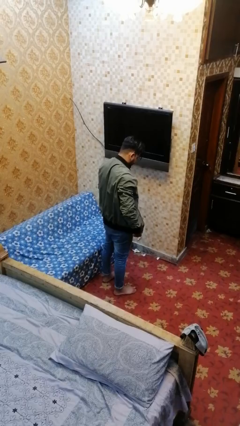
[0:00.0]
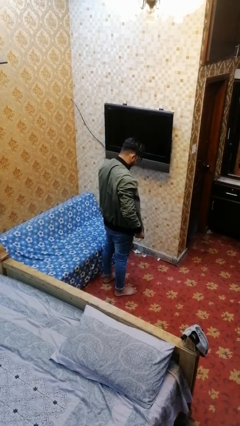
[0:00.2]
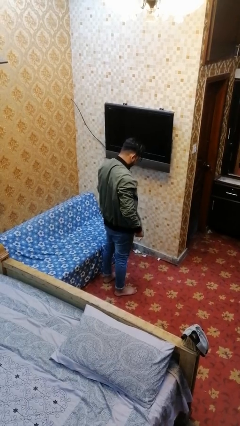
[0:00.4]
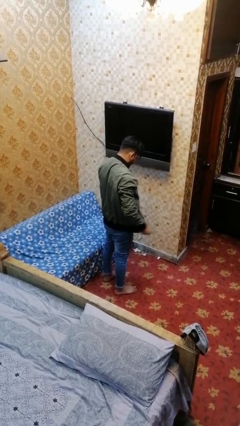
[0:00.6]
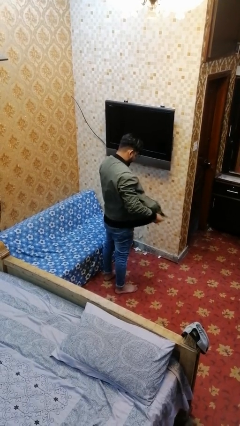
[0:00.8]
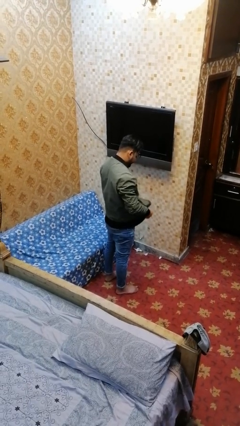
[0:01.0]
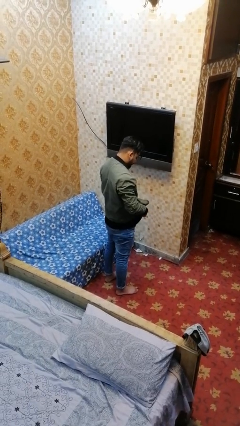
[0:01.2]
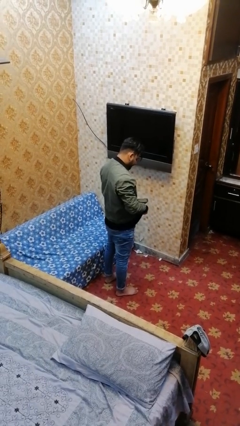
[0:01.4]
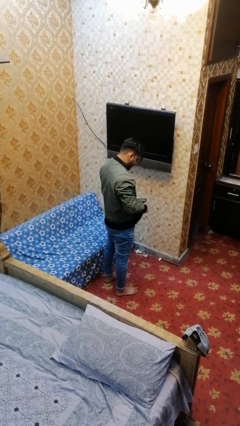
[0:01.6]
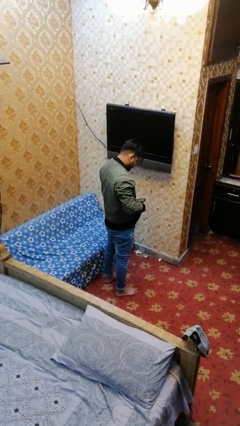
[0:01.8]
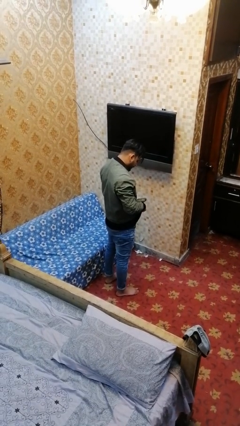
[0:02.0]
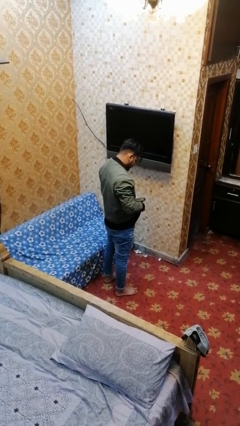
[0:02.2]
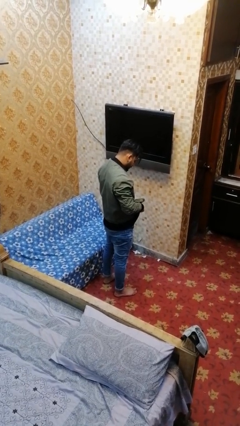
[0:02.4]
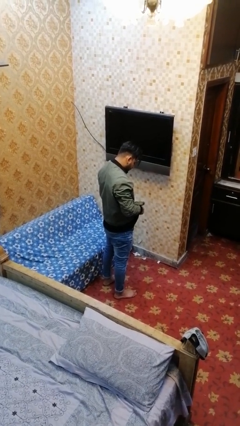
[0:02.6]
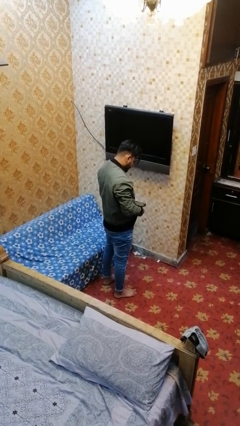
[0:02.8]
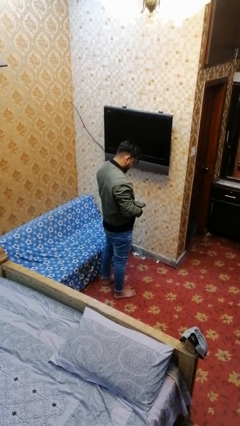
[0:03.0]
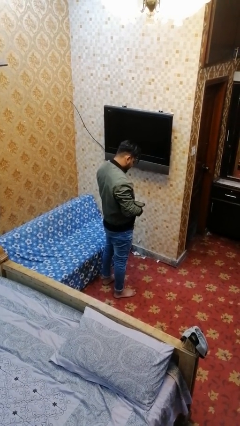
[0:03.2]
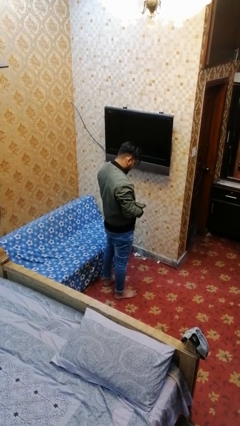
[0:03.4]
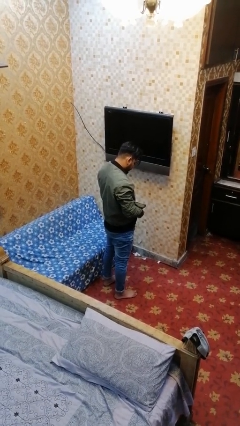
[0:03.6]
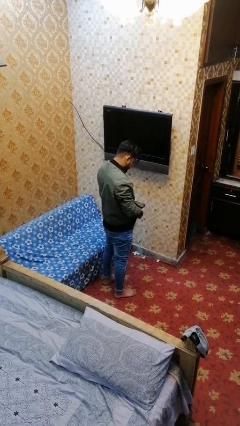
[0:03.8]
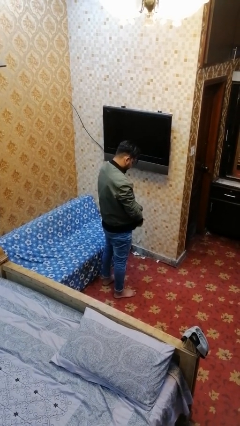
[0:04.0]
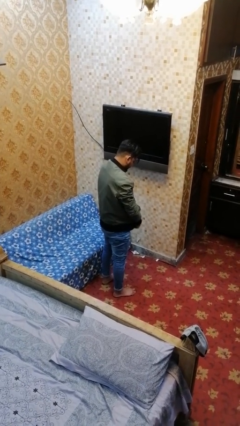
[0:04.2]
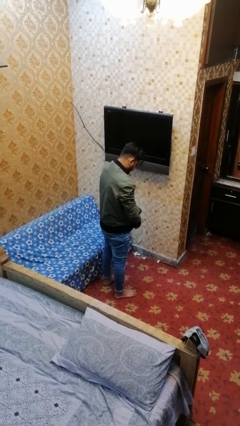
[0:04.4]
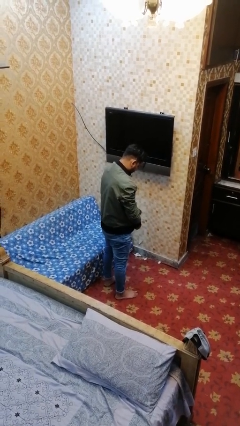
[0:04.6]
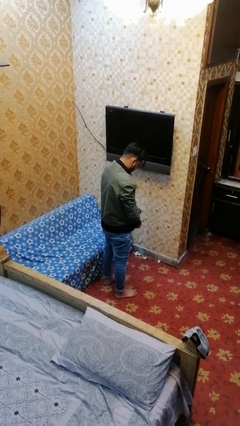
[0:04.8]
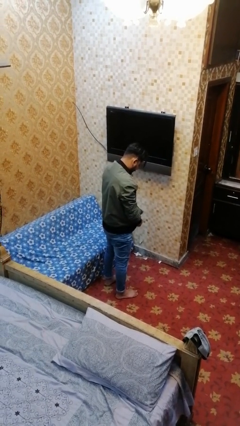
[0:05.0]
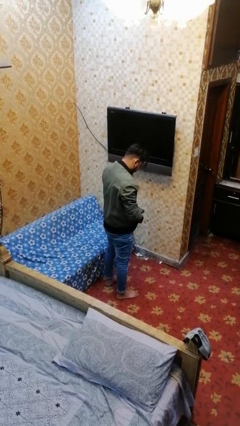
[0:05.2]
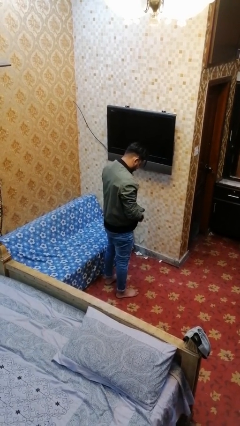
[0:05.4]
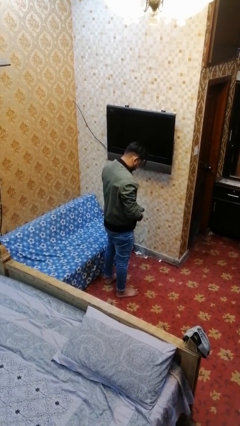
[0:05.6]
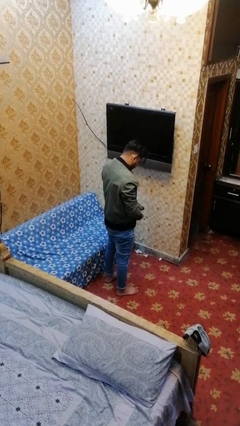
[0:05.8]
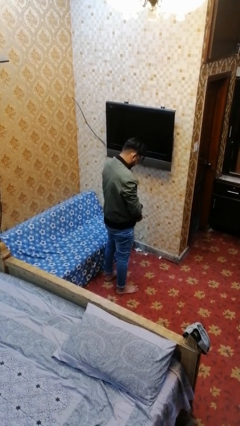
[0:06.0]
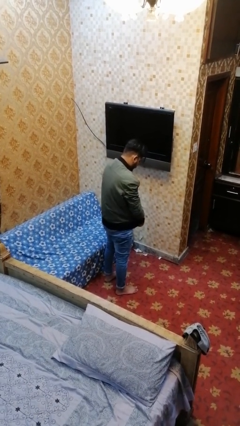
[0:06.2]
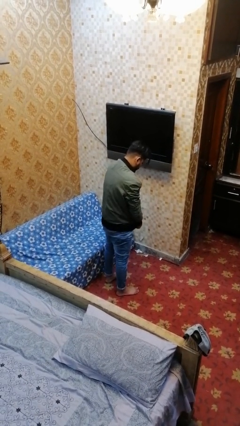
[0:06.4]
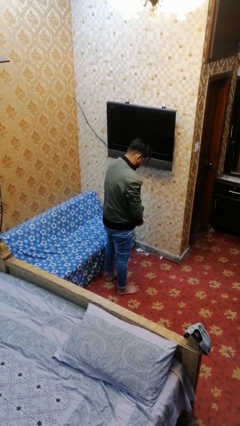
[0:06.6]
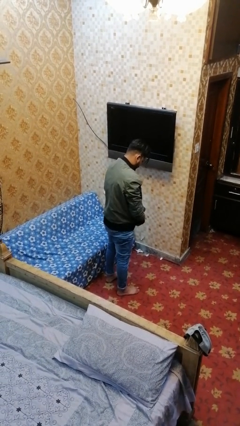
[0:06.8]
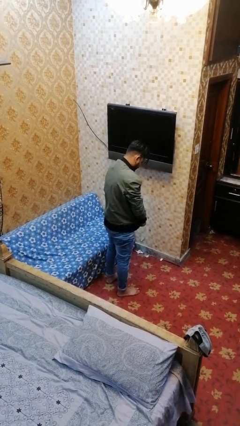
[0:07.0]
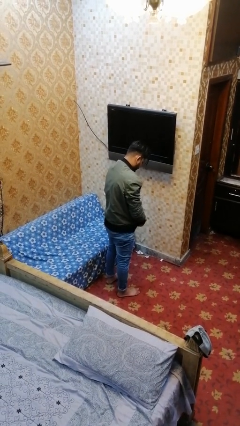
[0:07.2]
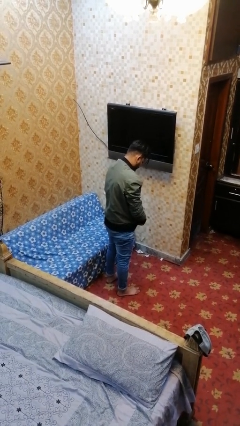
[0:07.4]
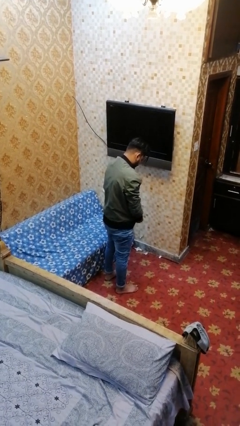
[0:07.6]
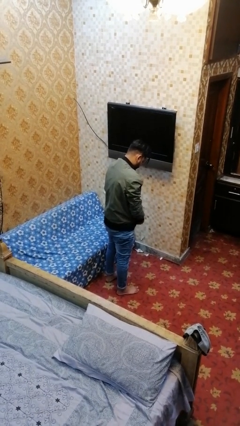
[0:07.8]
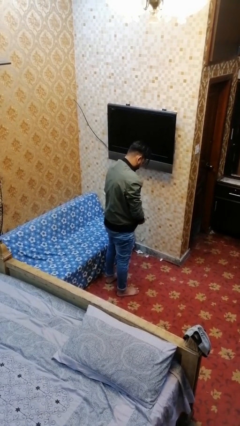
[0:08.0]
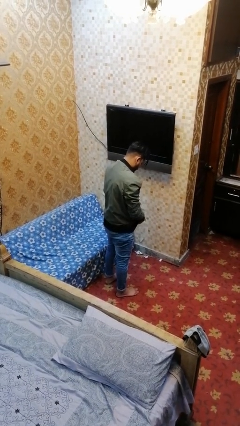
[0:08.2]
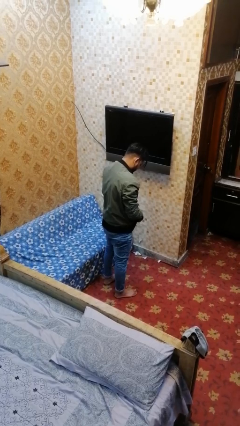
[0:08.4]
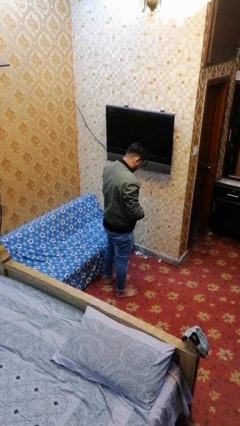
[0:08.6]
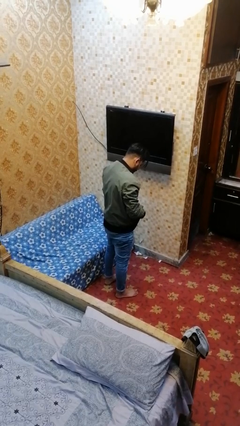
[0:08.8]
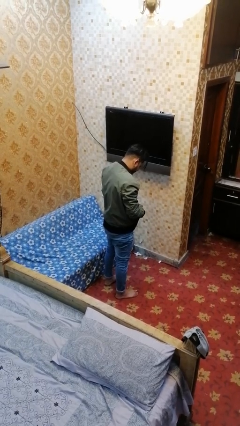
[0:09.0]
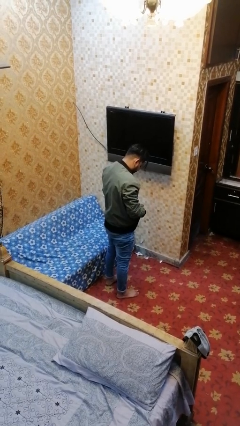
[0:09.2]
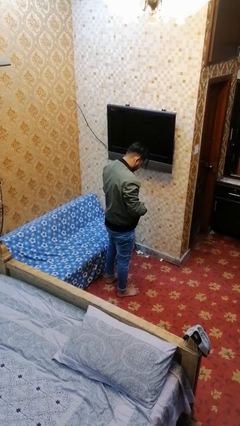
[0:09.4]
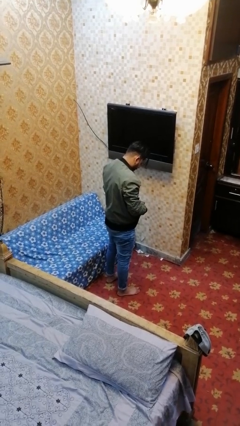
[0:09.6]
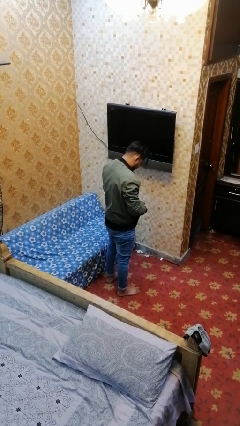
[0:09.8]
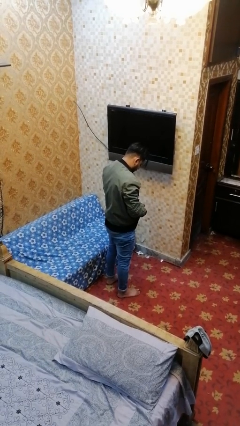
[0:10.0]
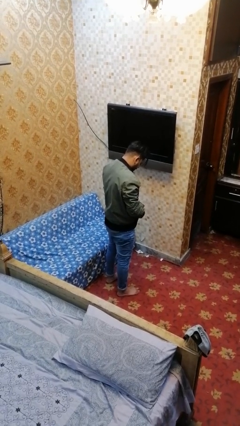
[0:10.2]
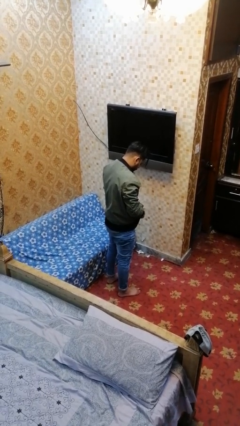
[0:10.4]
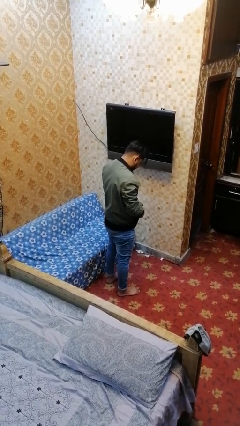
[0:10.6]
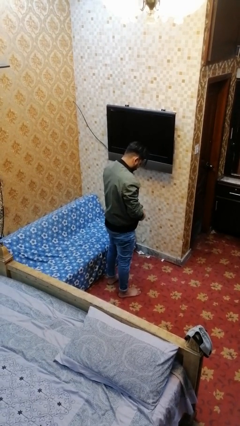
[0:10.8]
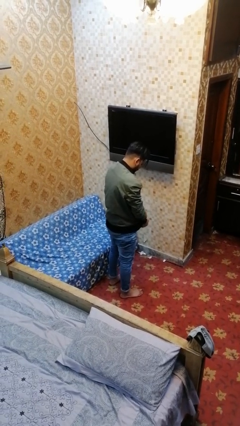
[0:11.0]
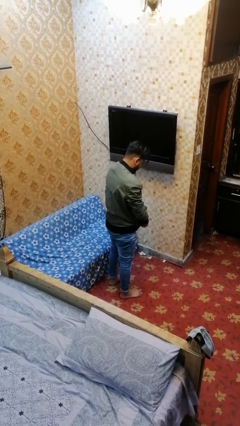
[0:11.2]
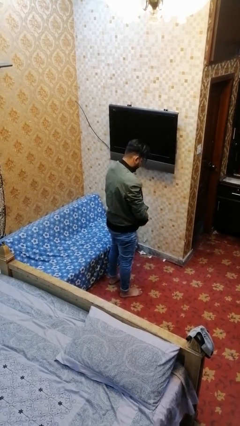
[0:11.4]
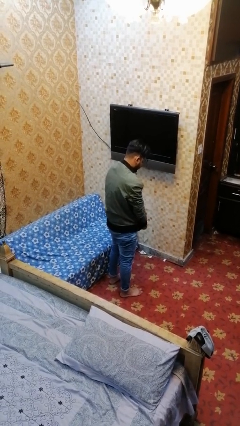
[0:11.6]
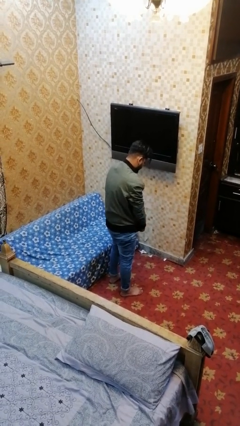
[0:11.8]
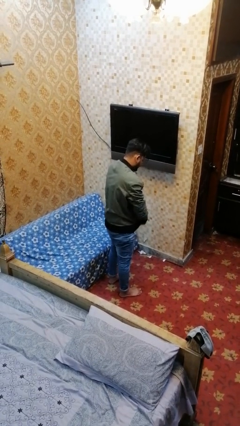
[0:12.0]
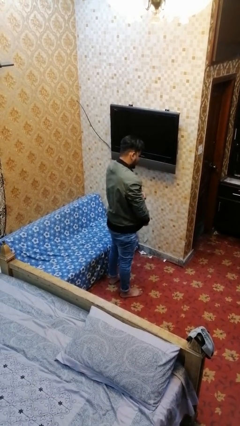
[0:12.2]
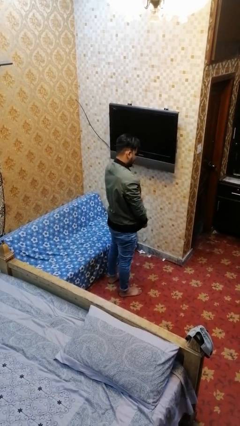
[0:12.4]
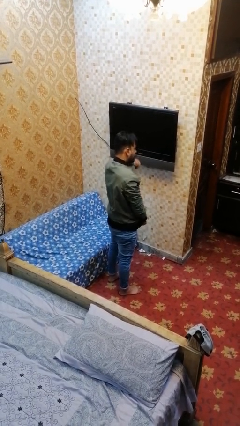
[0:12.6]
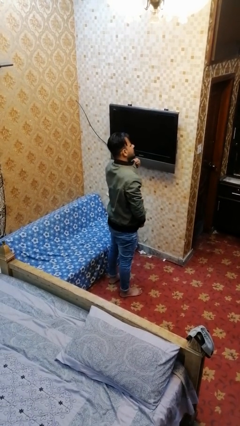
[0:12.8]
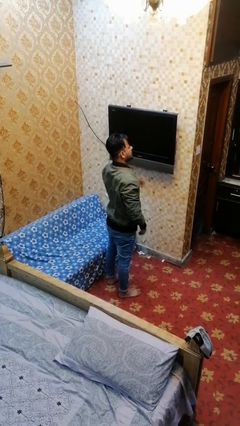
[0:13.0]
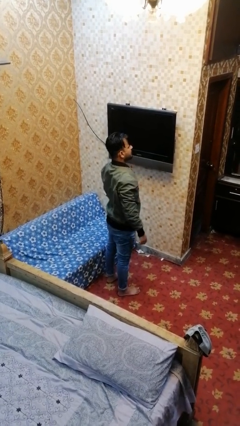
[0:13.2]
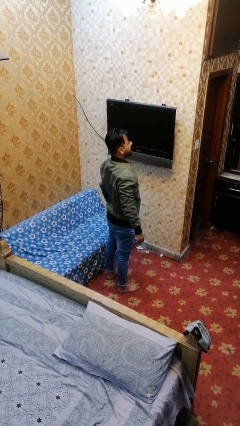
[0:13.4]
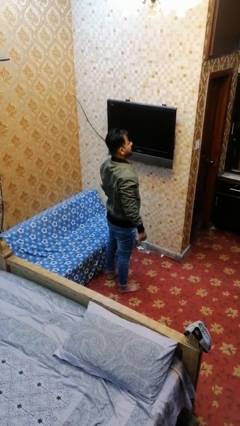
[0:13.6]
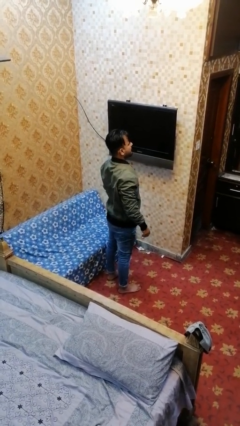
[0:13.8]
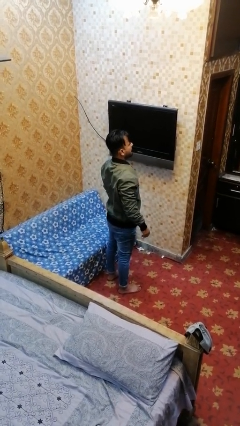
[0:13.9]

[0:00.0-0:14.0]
person zips up jacket

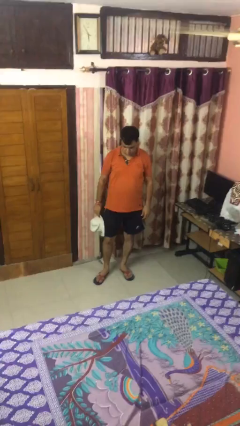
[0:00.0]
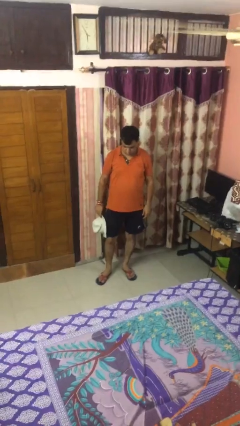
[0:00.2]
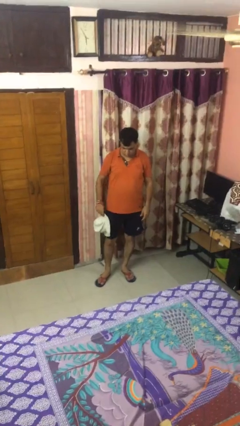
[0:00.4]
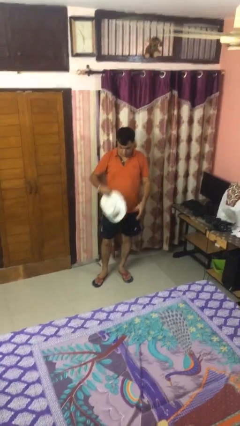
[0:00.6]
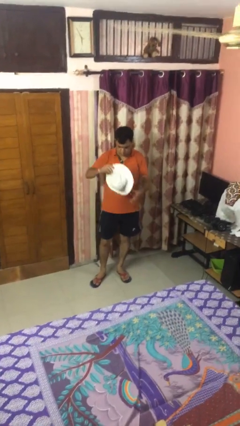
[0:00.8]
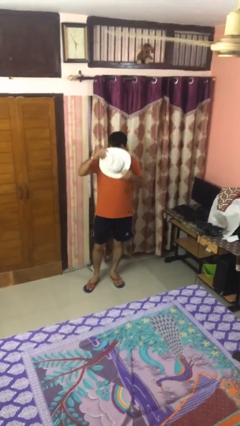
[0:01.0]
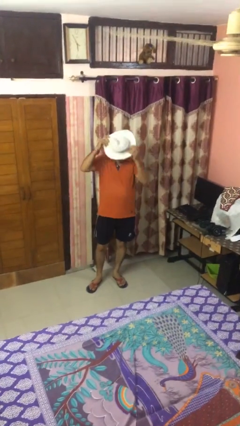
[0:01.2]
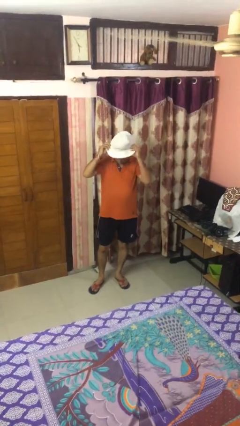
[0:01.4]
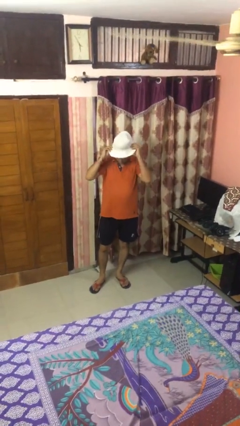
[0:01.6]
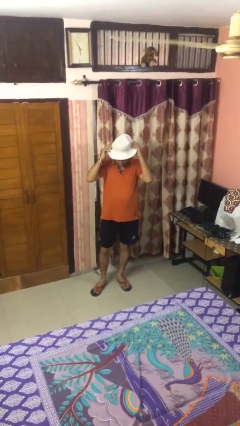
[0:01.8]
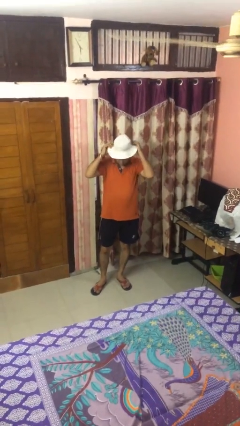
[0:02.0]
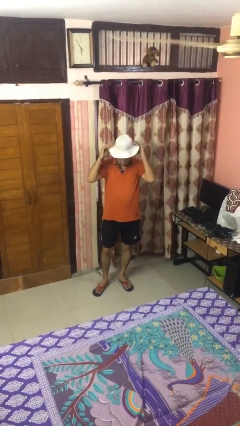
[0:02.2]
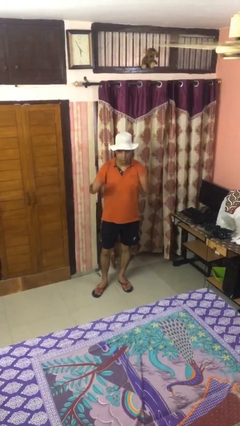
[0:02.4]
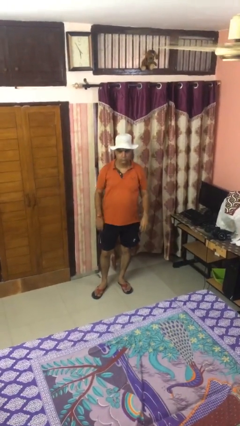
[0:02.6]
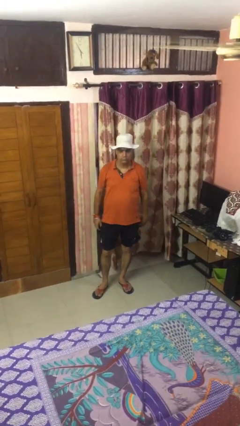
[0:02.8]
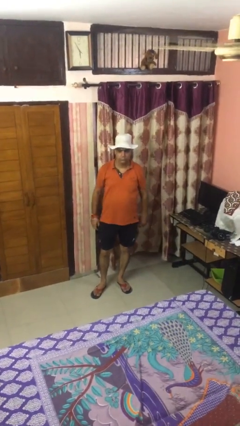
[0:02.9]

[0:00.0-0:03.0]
person puts on hat

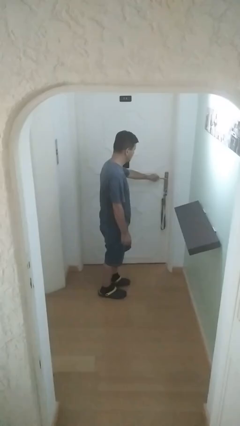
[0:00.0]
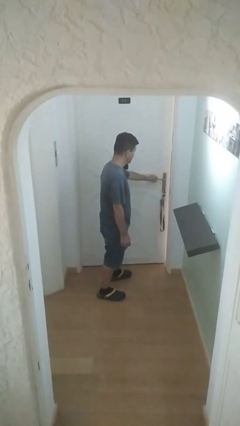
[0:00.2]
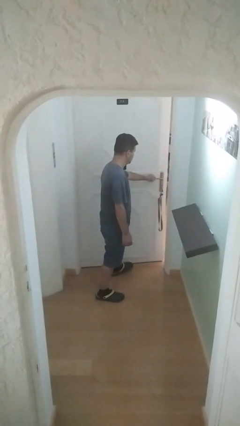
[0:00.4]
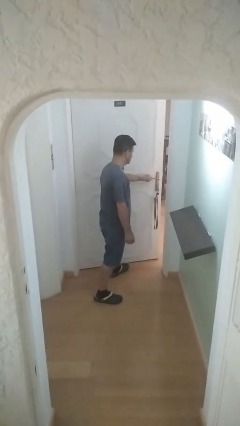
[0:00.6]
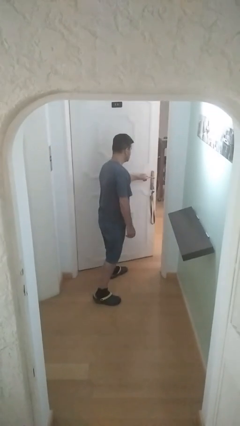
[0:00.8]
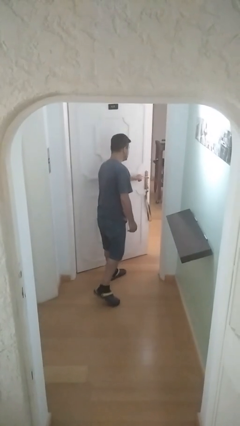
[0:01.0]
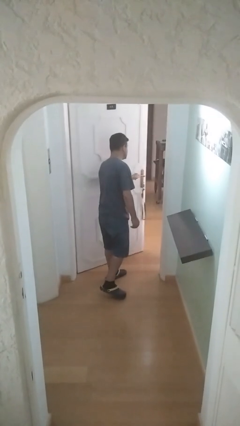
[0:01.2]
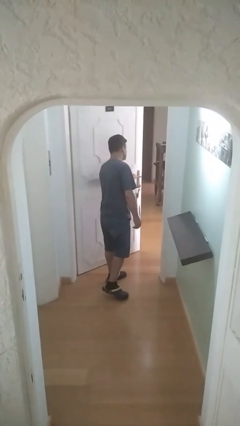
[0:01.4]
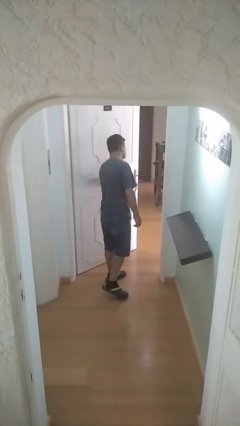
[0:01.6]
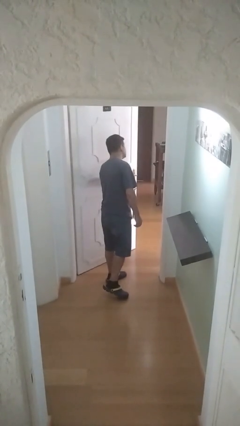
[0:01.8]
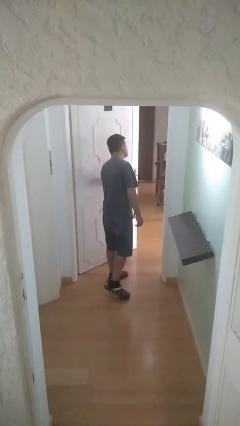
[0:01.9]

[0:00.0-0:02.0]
person opens facility door
